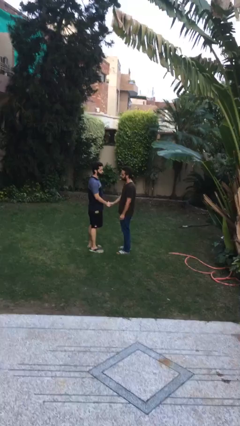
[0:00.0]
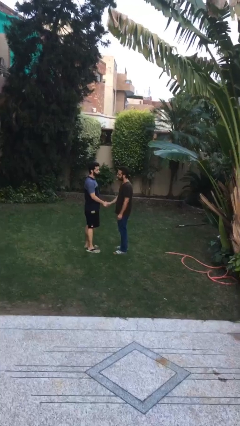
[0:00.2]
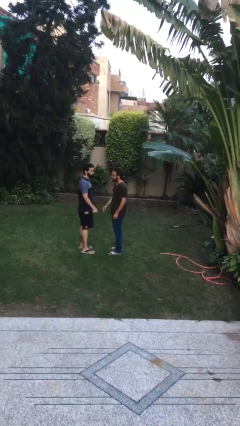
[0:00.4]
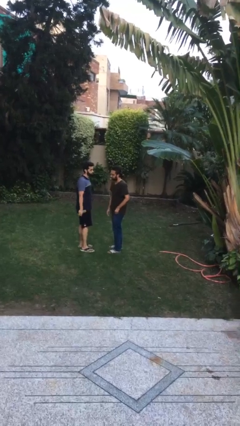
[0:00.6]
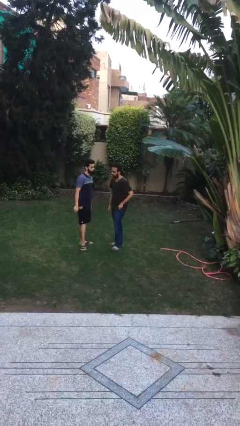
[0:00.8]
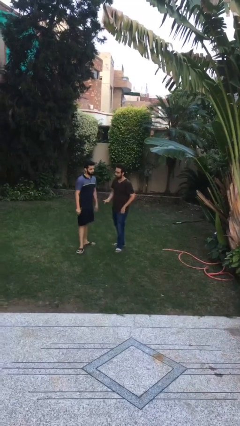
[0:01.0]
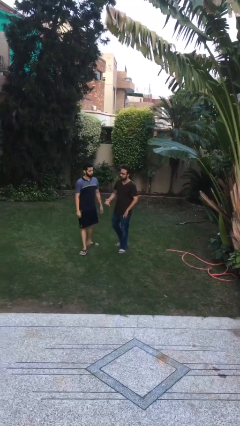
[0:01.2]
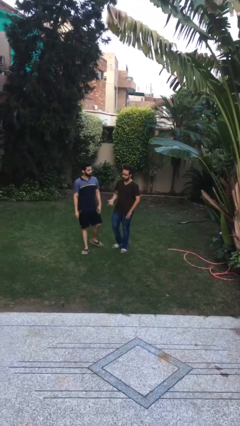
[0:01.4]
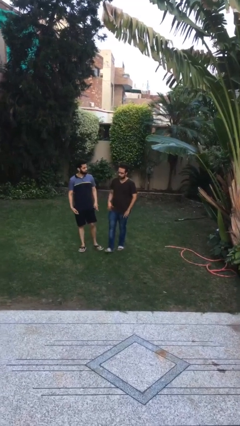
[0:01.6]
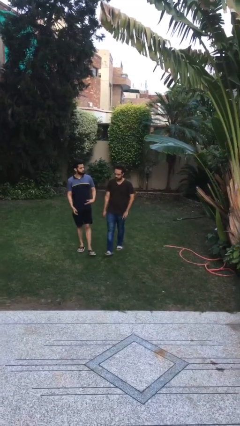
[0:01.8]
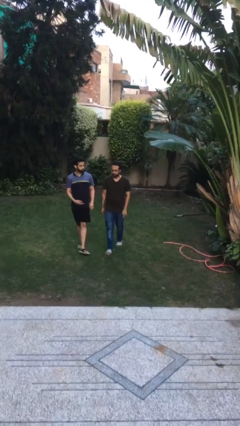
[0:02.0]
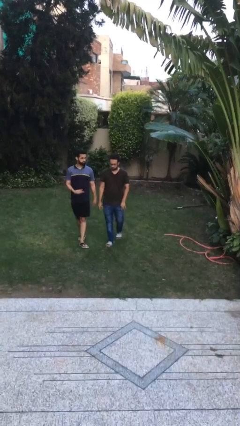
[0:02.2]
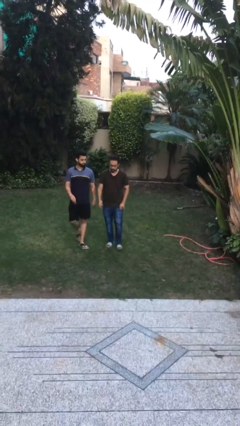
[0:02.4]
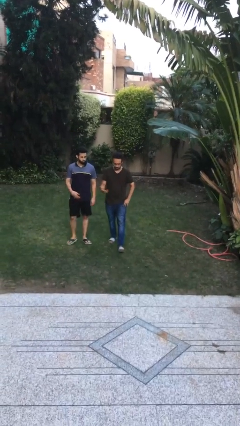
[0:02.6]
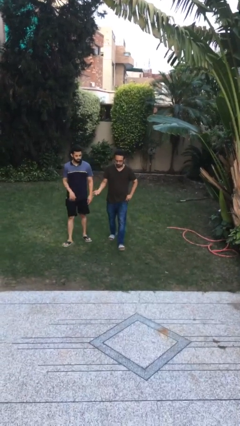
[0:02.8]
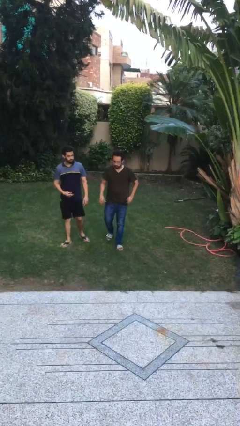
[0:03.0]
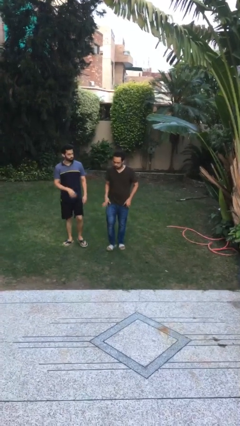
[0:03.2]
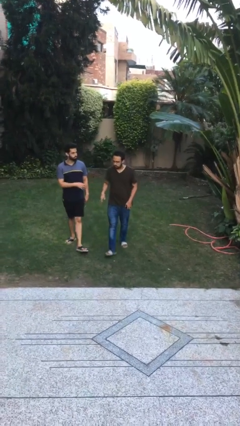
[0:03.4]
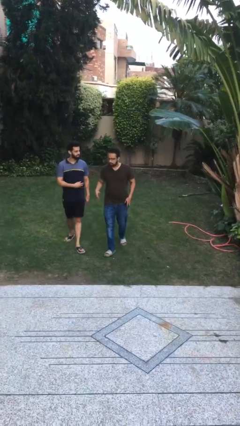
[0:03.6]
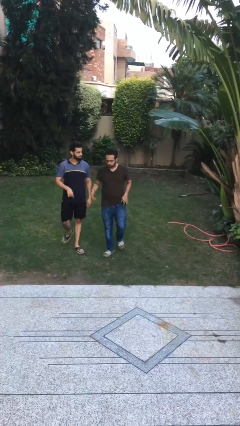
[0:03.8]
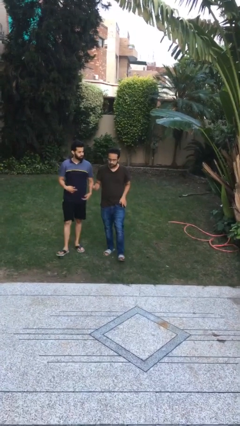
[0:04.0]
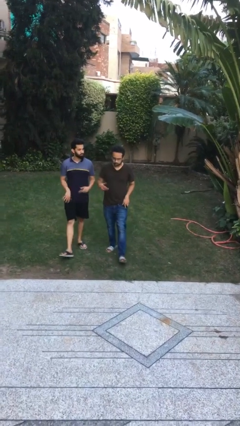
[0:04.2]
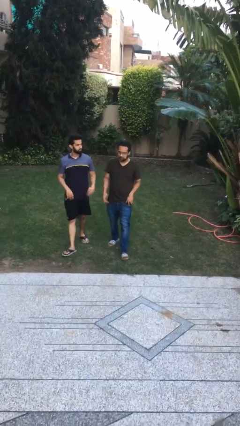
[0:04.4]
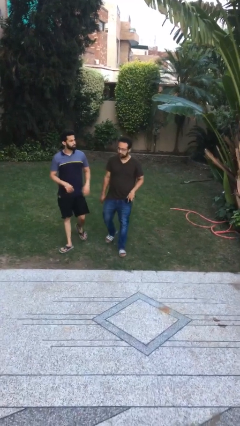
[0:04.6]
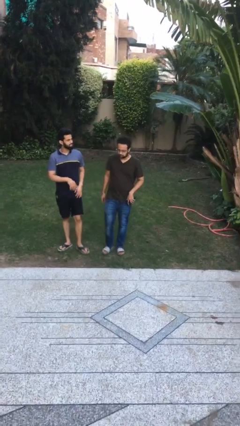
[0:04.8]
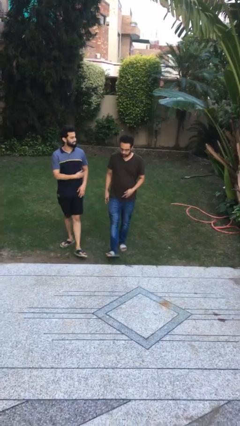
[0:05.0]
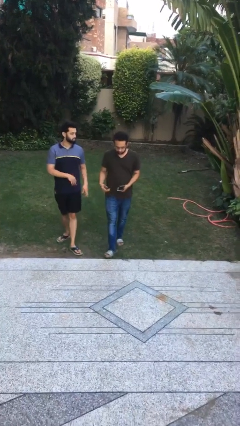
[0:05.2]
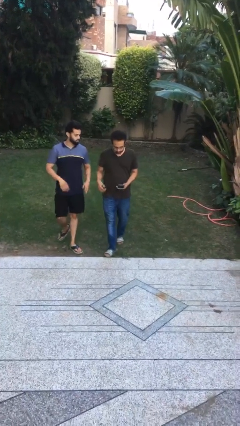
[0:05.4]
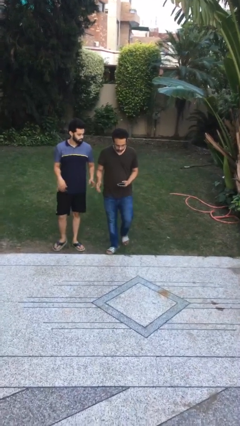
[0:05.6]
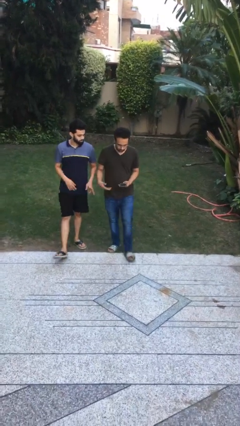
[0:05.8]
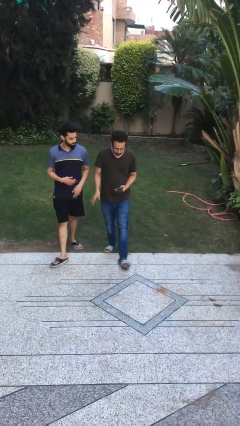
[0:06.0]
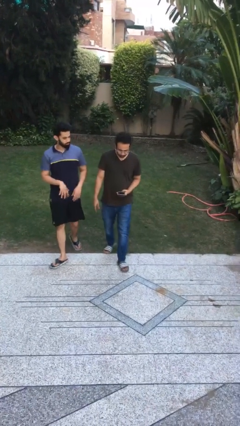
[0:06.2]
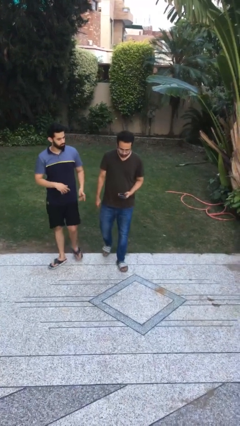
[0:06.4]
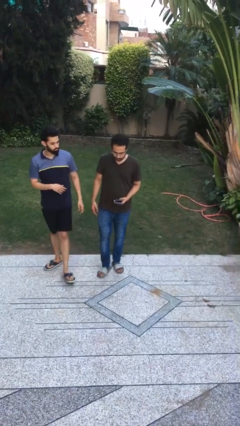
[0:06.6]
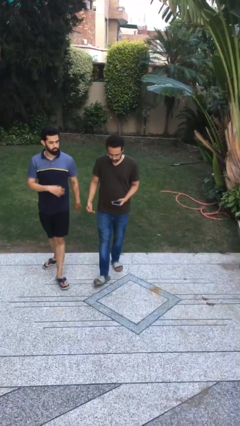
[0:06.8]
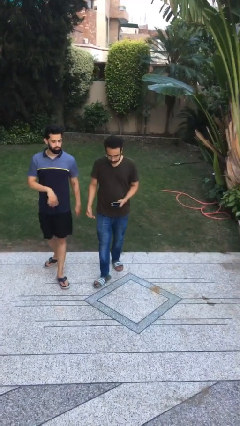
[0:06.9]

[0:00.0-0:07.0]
person talks to person

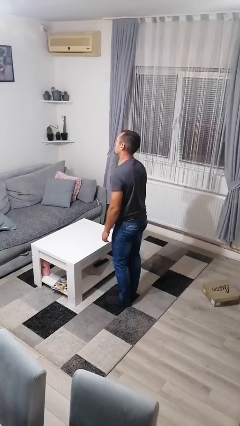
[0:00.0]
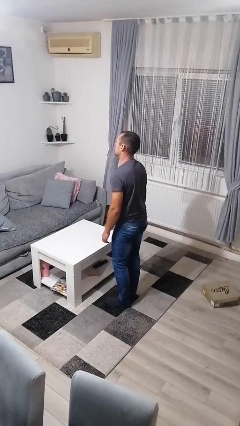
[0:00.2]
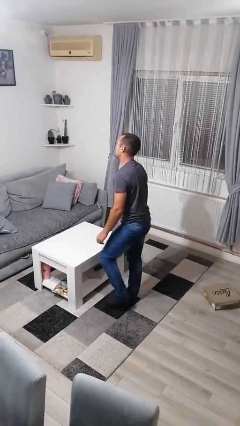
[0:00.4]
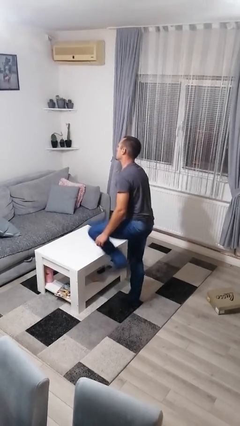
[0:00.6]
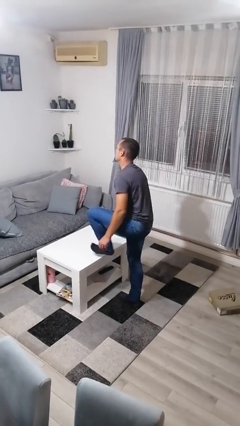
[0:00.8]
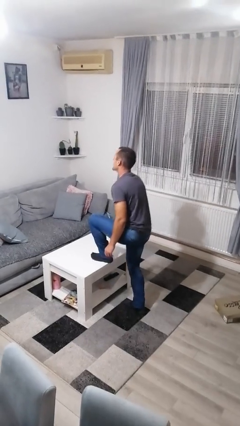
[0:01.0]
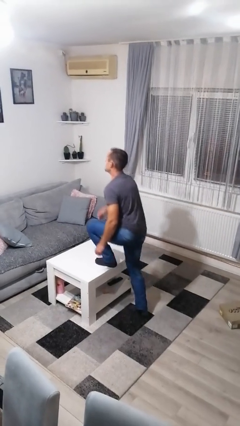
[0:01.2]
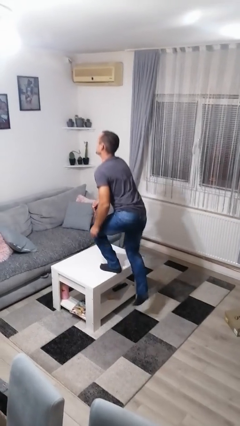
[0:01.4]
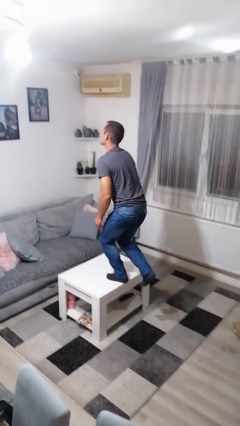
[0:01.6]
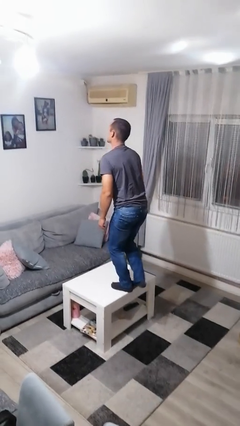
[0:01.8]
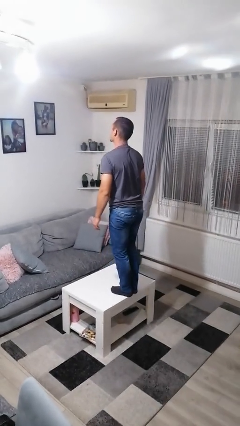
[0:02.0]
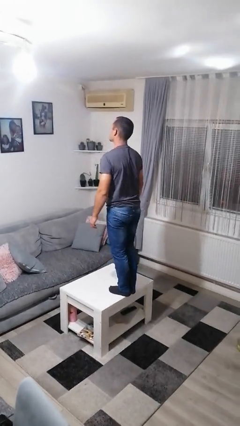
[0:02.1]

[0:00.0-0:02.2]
person climbs on table

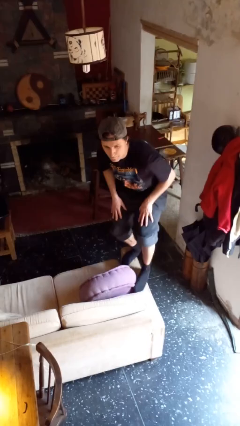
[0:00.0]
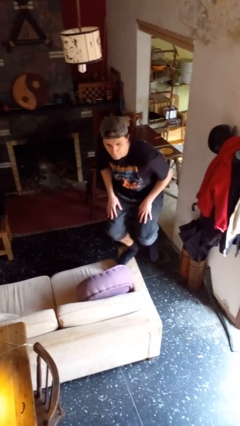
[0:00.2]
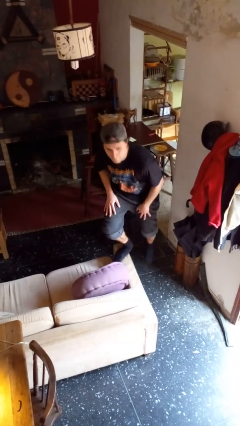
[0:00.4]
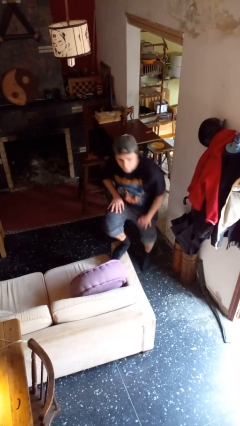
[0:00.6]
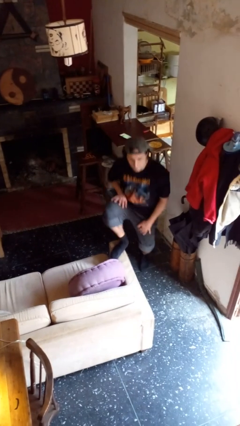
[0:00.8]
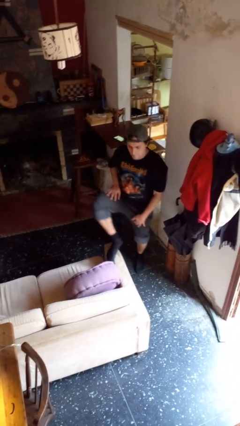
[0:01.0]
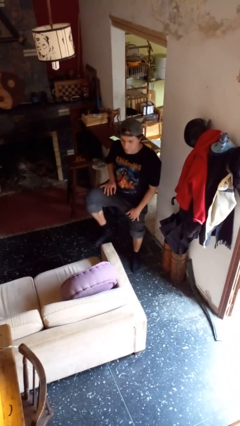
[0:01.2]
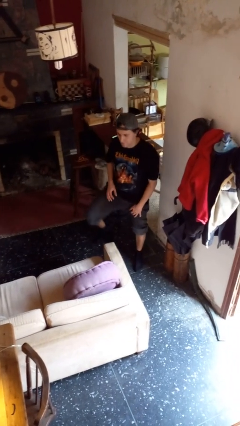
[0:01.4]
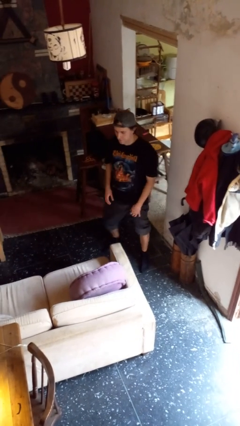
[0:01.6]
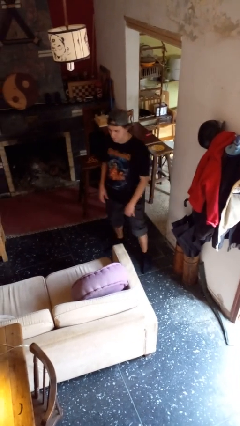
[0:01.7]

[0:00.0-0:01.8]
person climbs off couch

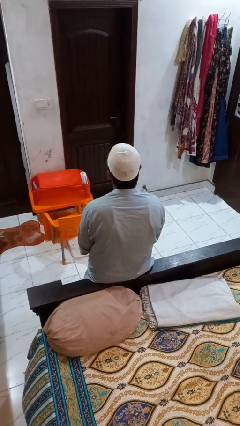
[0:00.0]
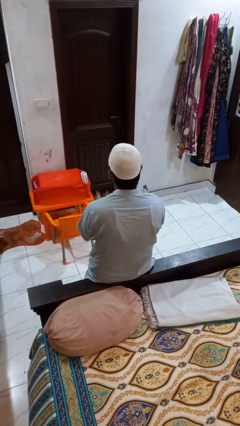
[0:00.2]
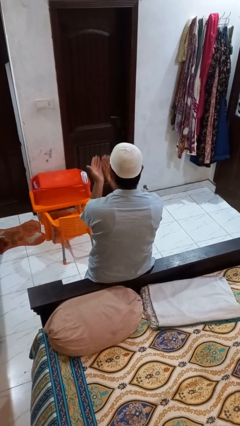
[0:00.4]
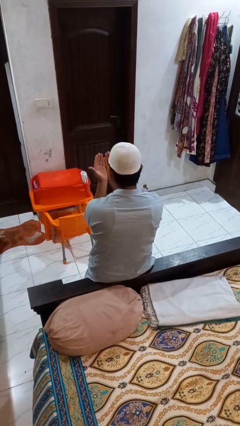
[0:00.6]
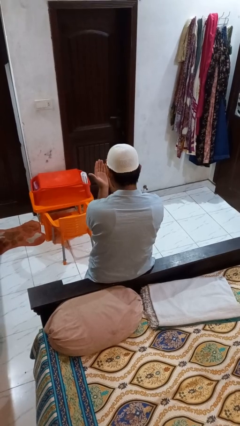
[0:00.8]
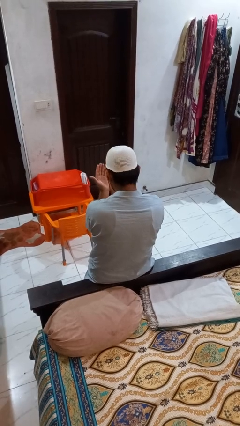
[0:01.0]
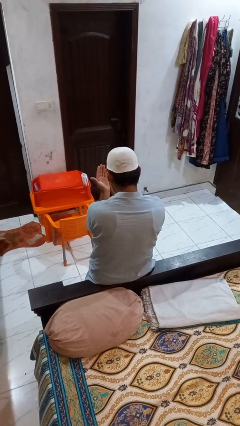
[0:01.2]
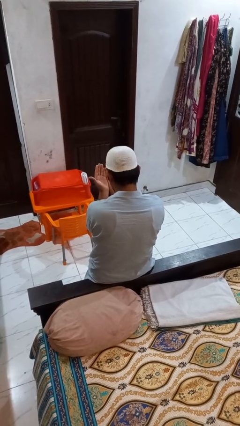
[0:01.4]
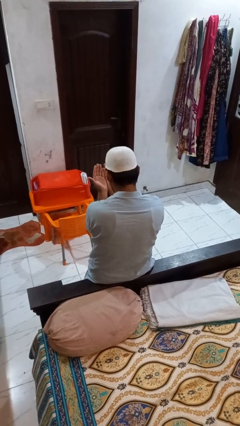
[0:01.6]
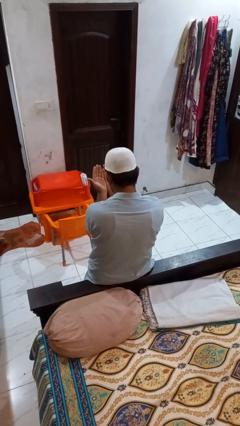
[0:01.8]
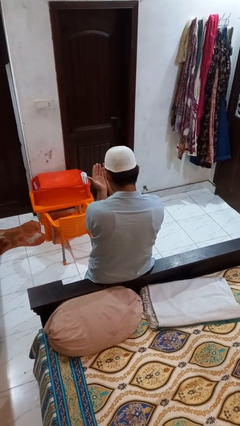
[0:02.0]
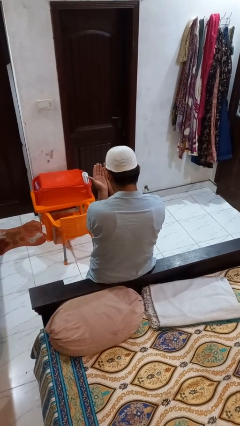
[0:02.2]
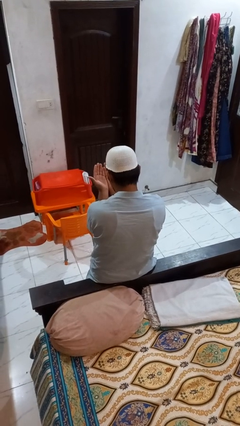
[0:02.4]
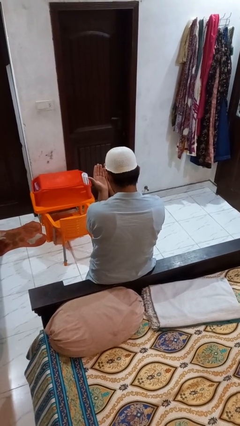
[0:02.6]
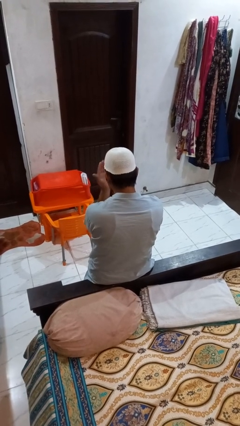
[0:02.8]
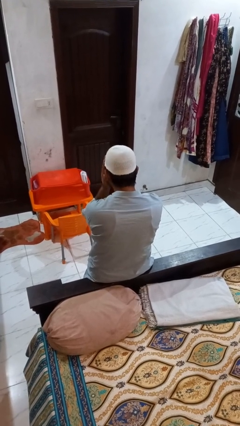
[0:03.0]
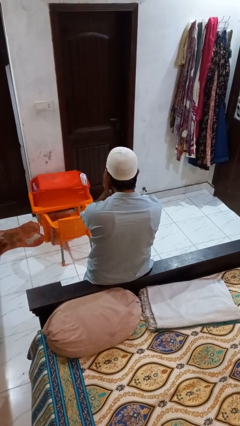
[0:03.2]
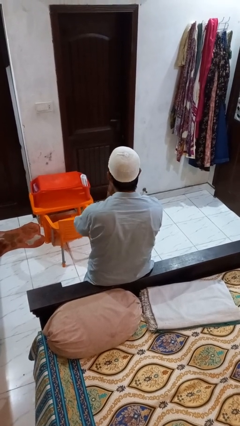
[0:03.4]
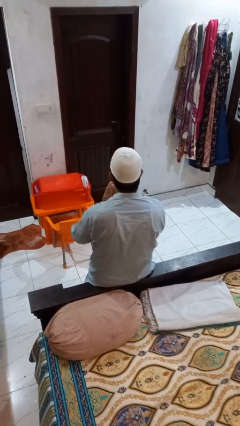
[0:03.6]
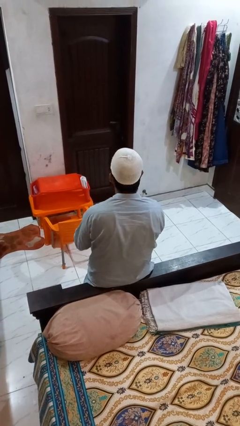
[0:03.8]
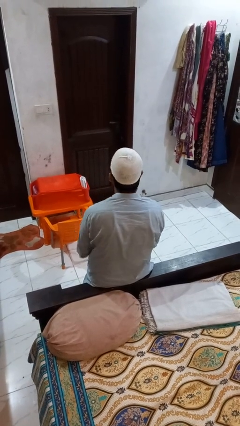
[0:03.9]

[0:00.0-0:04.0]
person prays

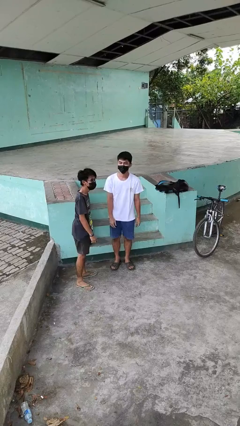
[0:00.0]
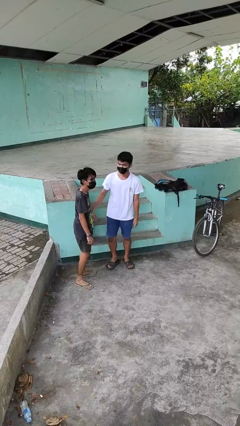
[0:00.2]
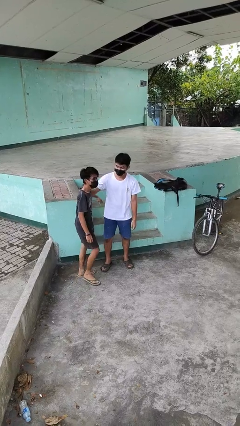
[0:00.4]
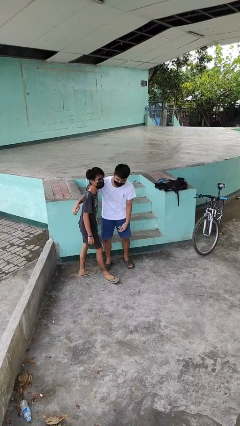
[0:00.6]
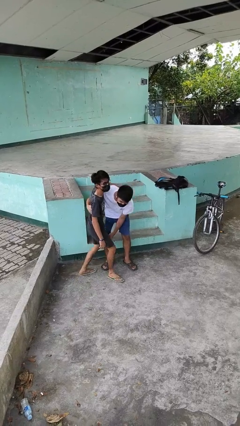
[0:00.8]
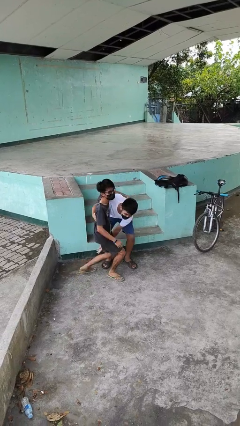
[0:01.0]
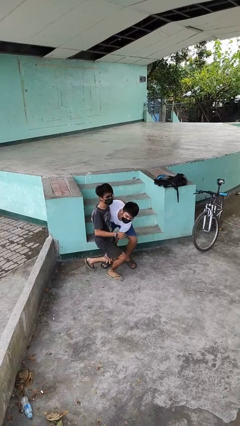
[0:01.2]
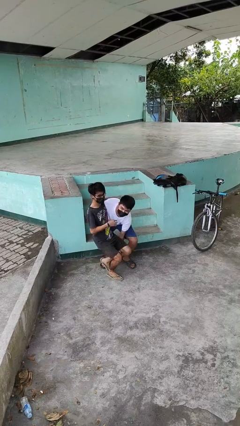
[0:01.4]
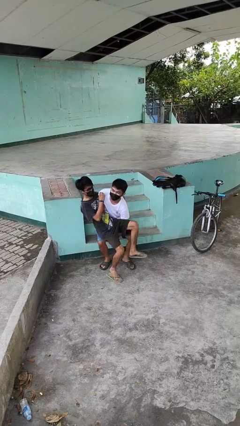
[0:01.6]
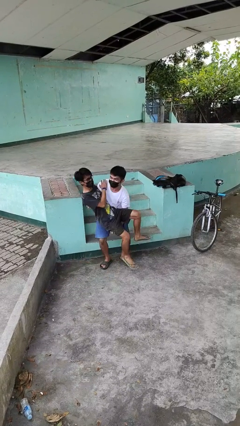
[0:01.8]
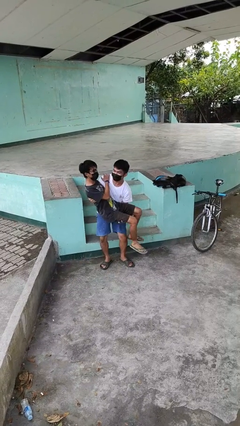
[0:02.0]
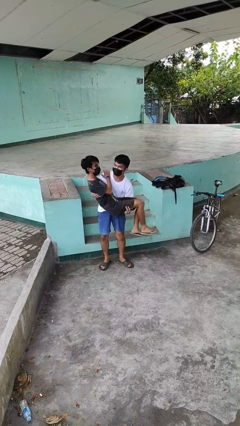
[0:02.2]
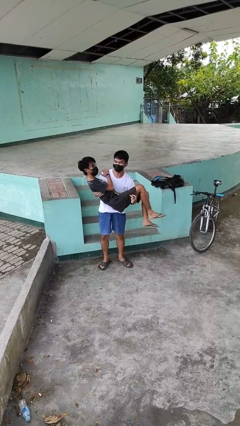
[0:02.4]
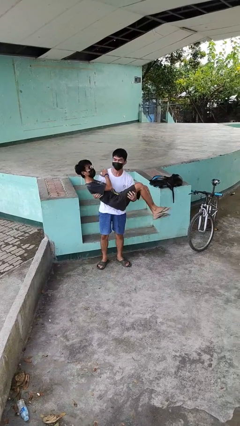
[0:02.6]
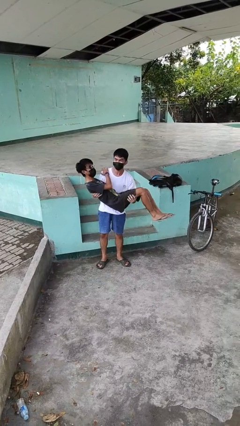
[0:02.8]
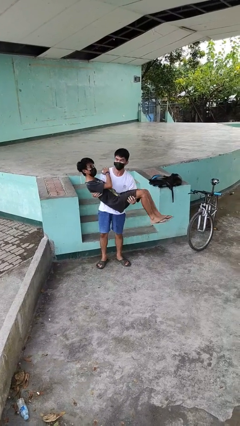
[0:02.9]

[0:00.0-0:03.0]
person picks up person
